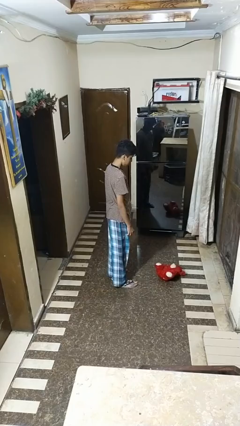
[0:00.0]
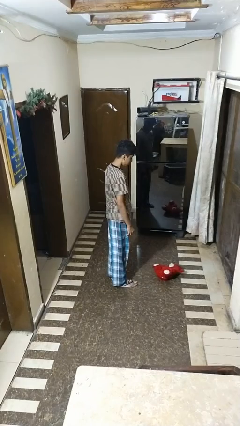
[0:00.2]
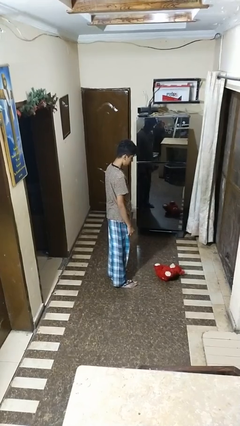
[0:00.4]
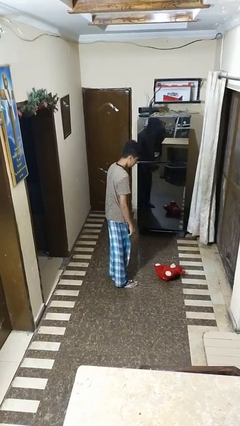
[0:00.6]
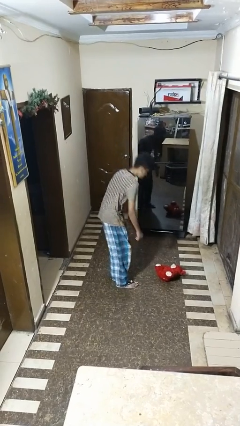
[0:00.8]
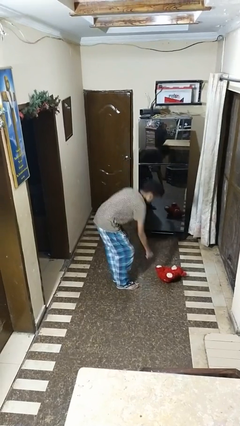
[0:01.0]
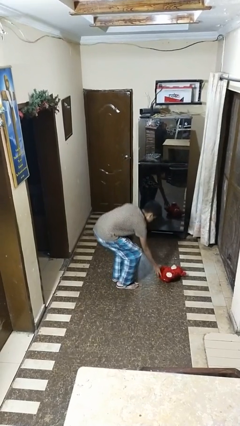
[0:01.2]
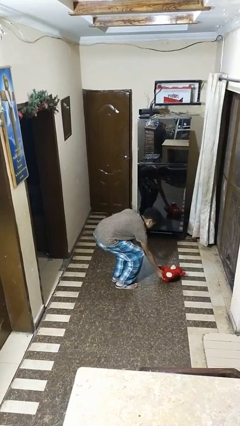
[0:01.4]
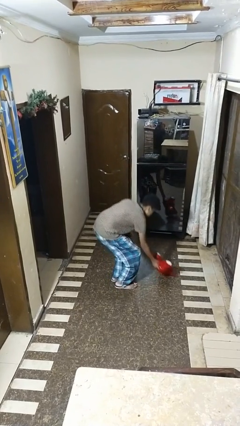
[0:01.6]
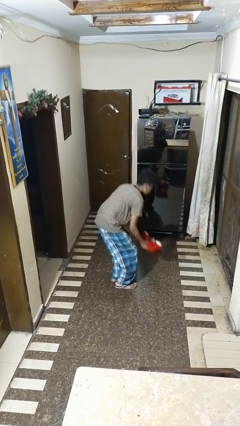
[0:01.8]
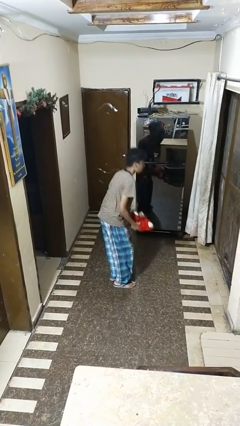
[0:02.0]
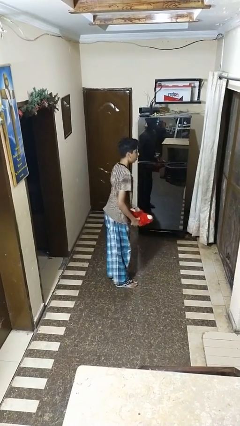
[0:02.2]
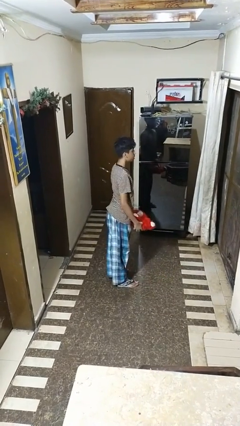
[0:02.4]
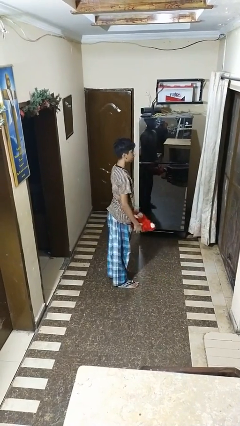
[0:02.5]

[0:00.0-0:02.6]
person picks up object from floor

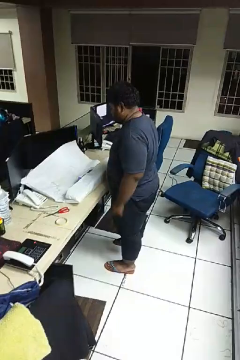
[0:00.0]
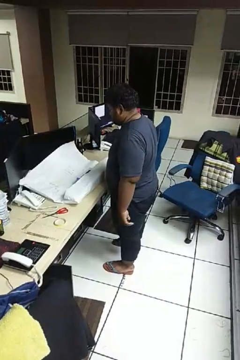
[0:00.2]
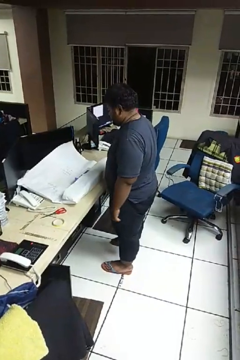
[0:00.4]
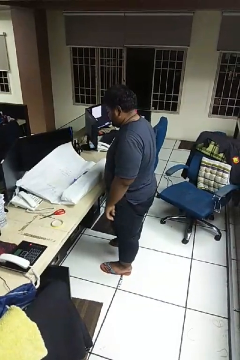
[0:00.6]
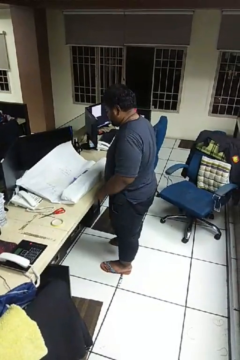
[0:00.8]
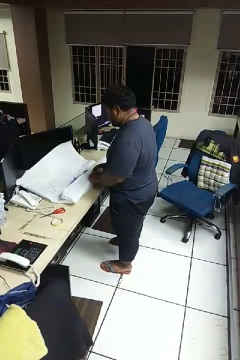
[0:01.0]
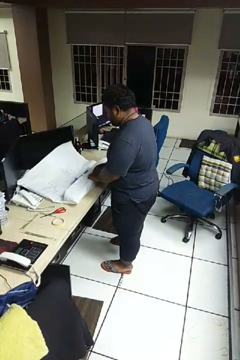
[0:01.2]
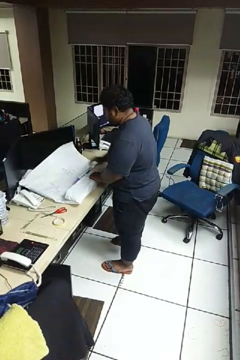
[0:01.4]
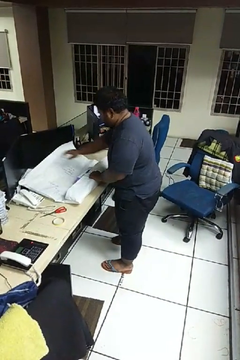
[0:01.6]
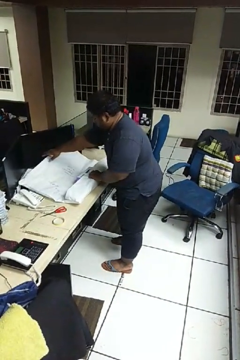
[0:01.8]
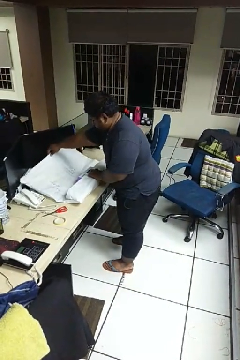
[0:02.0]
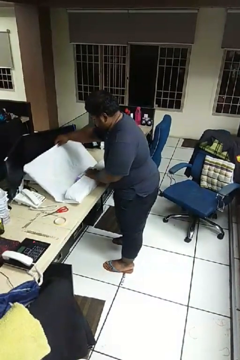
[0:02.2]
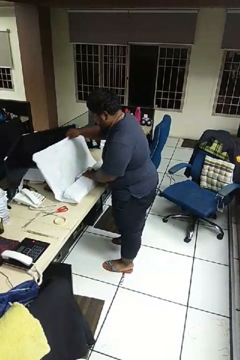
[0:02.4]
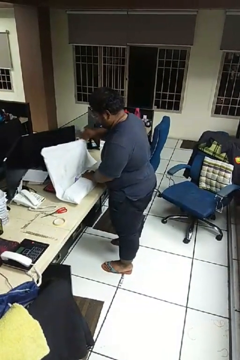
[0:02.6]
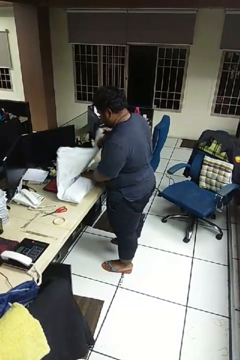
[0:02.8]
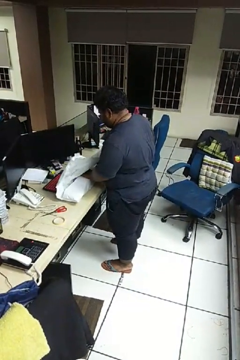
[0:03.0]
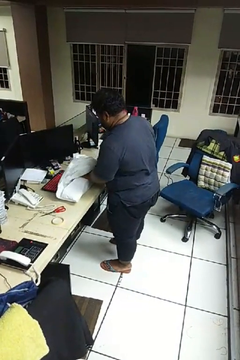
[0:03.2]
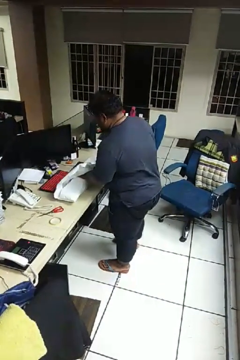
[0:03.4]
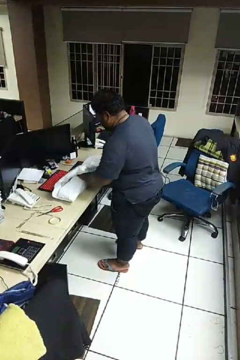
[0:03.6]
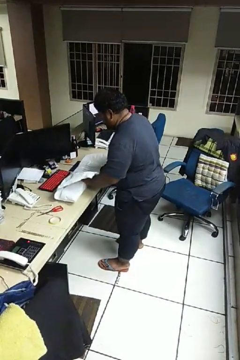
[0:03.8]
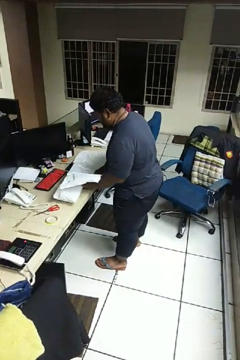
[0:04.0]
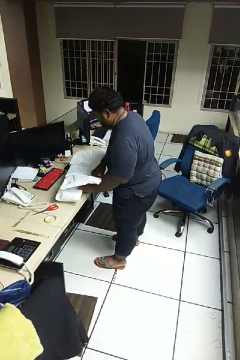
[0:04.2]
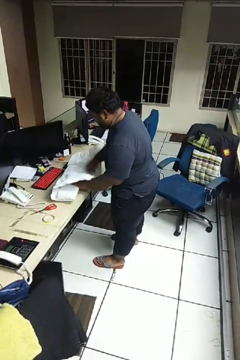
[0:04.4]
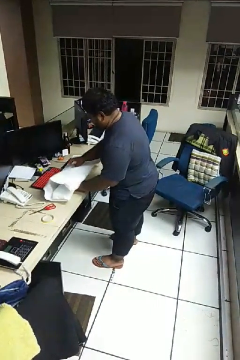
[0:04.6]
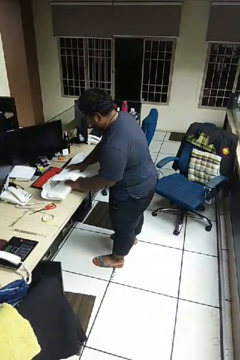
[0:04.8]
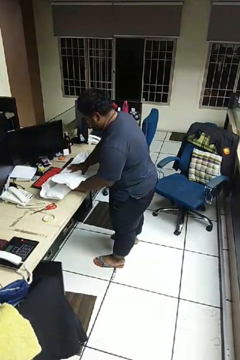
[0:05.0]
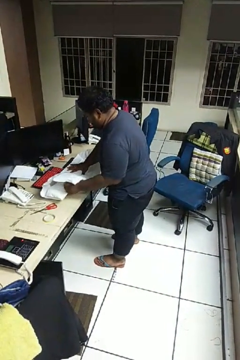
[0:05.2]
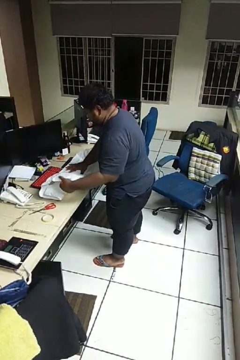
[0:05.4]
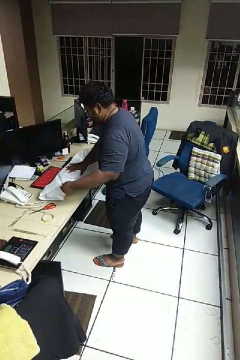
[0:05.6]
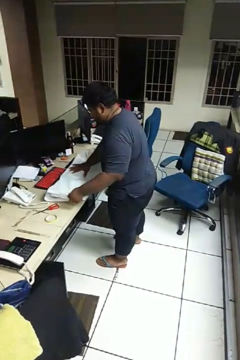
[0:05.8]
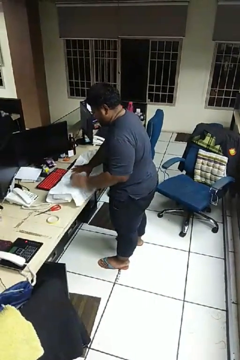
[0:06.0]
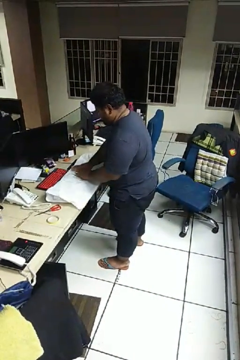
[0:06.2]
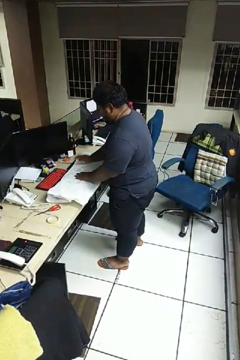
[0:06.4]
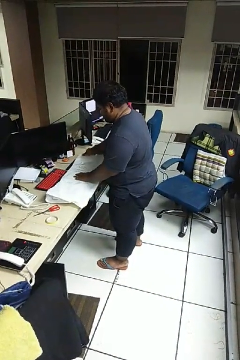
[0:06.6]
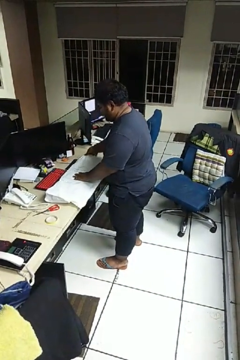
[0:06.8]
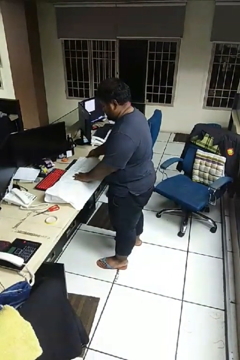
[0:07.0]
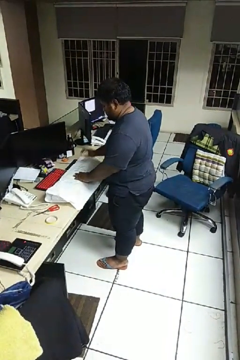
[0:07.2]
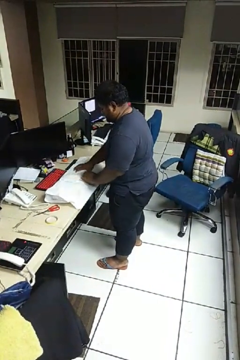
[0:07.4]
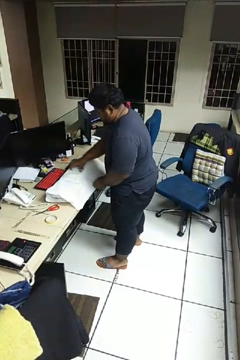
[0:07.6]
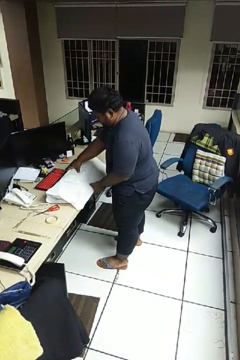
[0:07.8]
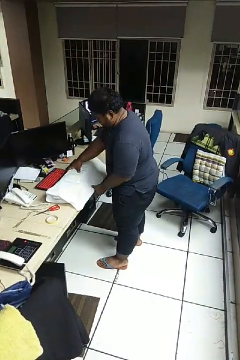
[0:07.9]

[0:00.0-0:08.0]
person wraps box

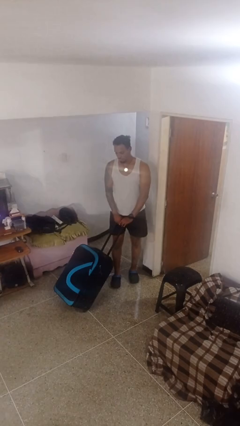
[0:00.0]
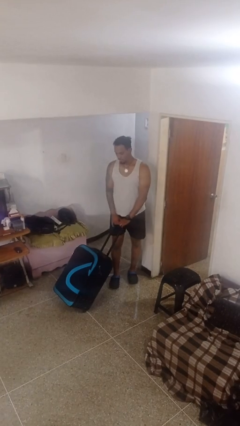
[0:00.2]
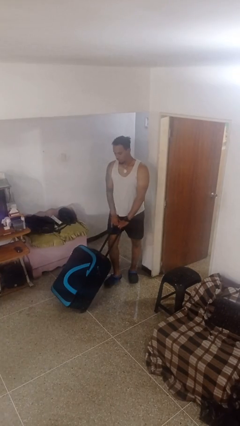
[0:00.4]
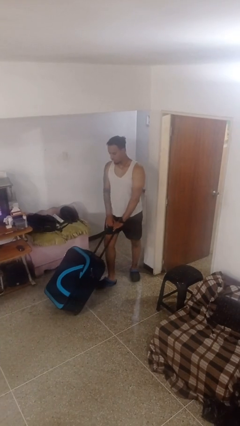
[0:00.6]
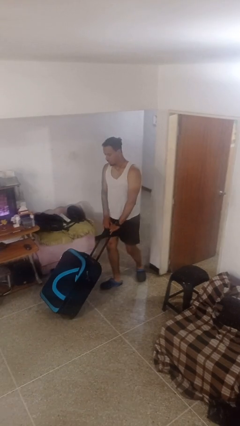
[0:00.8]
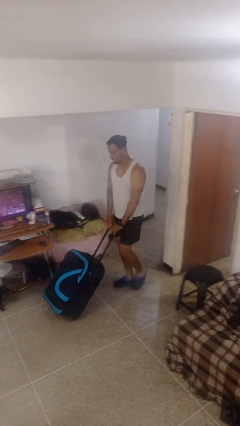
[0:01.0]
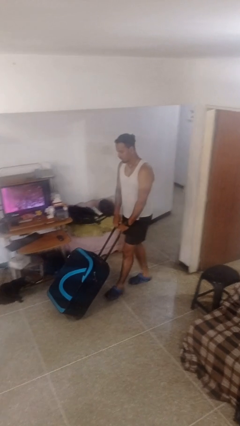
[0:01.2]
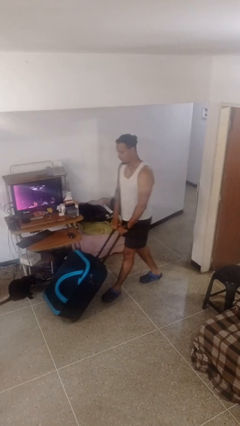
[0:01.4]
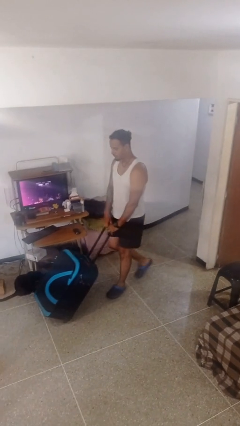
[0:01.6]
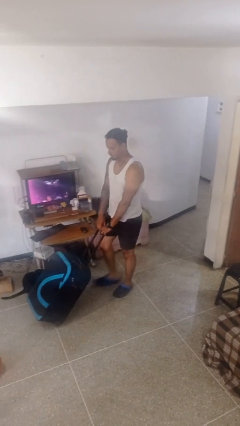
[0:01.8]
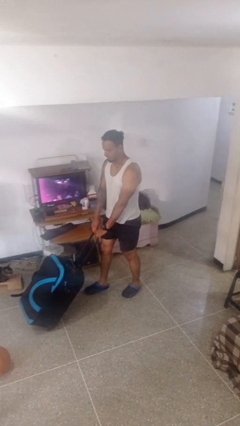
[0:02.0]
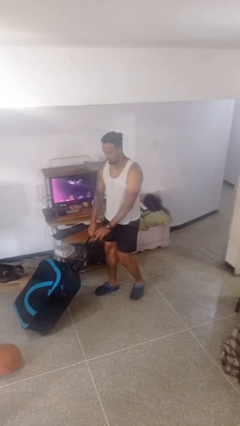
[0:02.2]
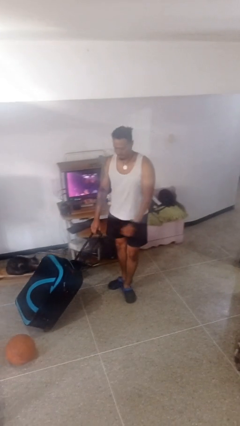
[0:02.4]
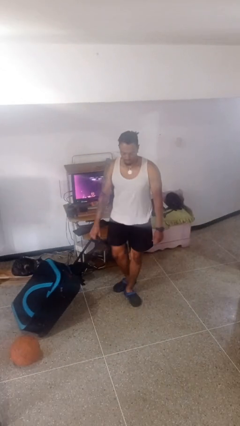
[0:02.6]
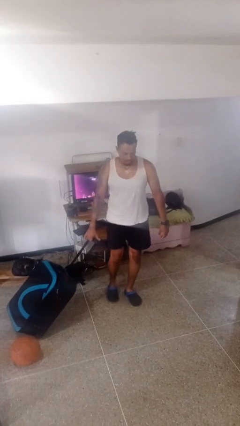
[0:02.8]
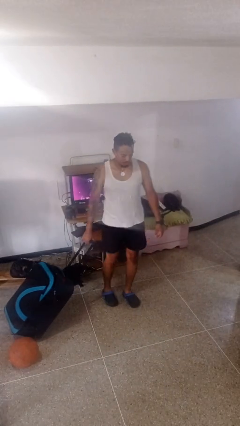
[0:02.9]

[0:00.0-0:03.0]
person pushes wheeled cart

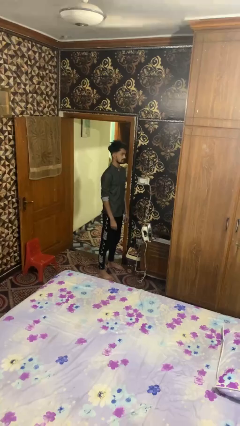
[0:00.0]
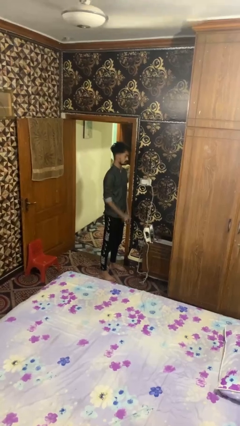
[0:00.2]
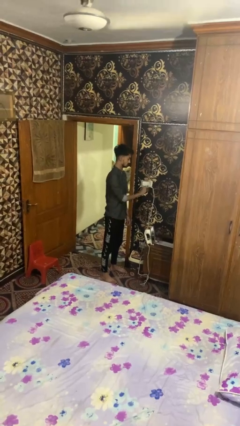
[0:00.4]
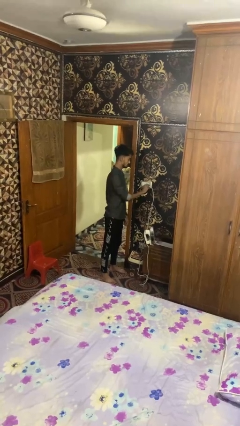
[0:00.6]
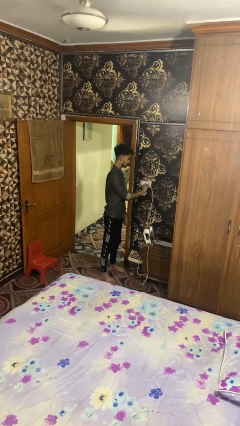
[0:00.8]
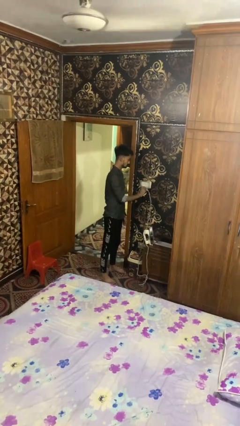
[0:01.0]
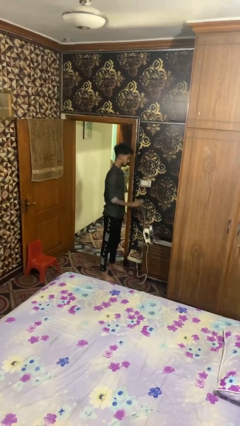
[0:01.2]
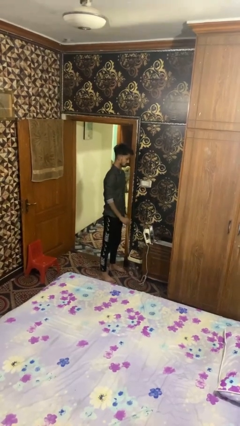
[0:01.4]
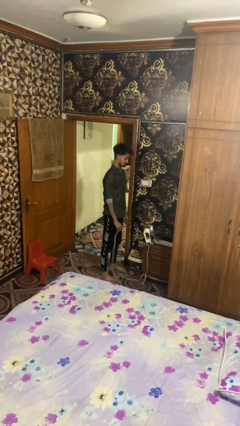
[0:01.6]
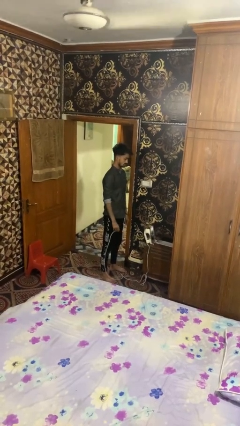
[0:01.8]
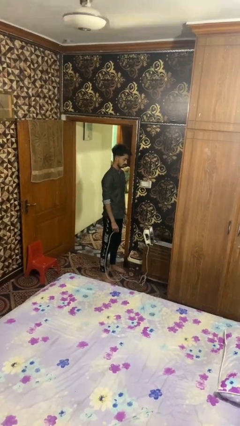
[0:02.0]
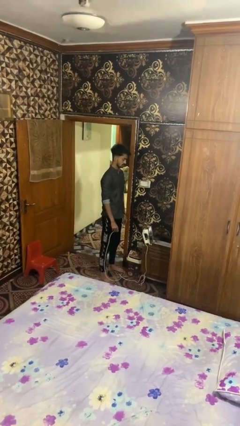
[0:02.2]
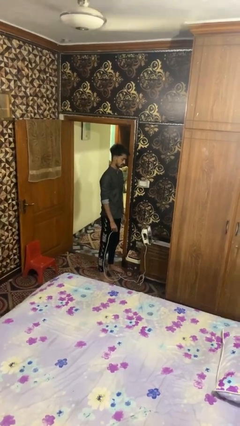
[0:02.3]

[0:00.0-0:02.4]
person unplugs from electrical socket

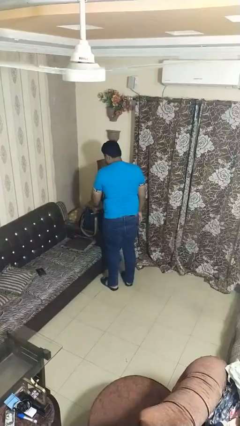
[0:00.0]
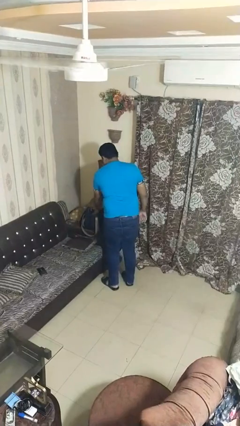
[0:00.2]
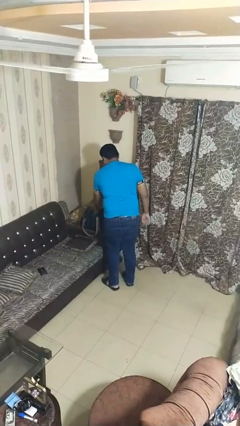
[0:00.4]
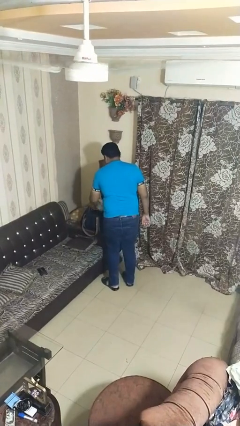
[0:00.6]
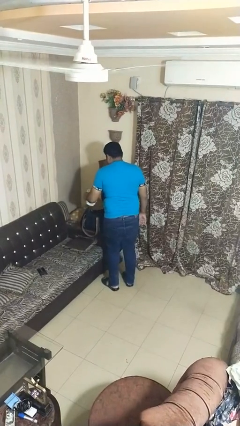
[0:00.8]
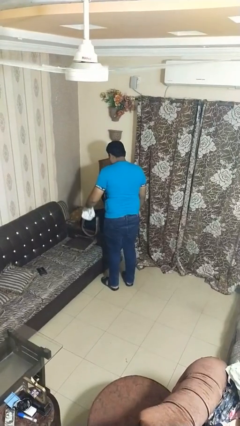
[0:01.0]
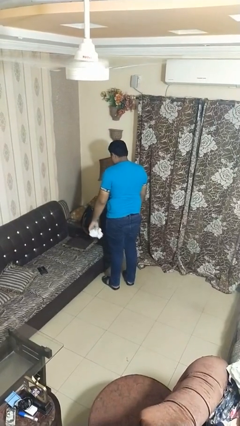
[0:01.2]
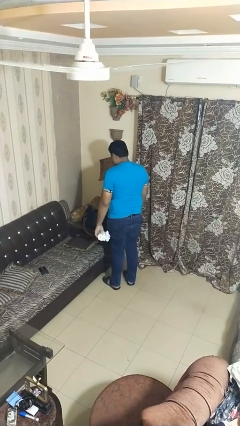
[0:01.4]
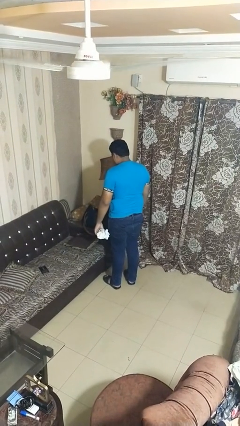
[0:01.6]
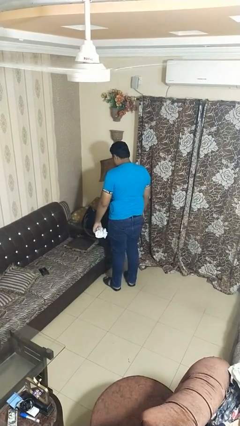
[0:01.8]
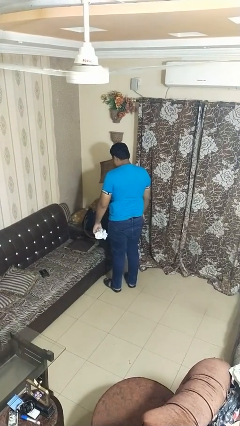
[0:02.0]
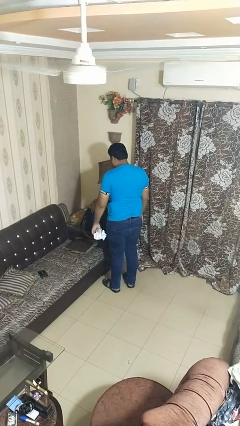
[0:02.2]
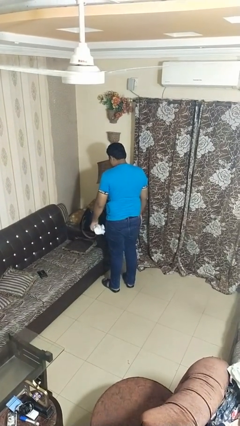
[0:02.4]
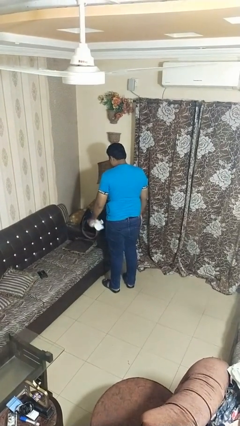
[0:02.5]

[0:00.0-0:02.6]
person takes object from bag
